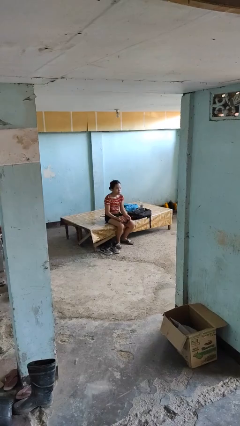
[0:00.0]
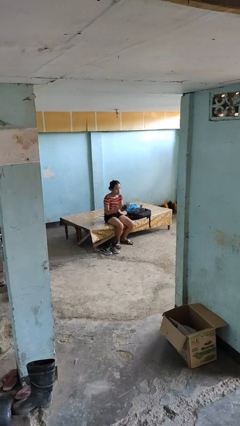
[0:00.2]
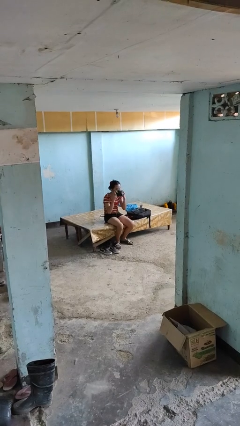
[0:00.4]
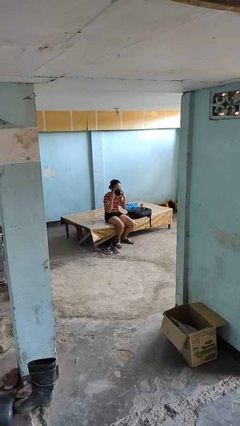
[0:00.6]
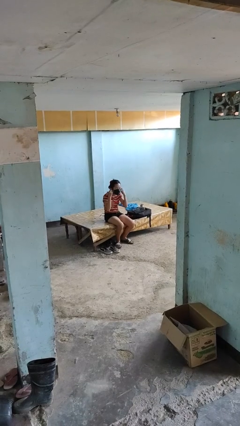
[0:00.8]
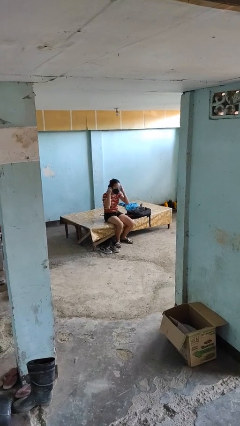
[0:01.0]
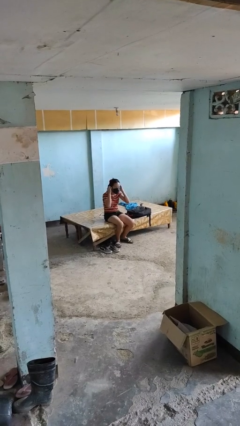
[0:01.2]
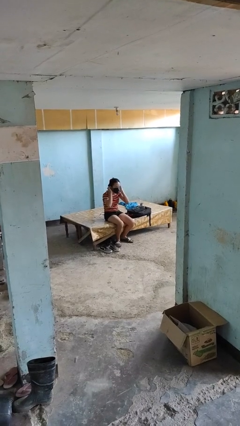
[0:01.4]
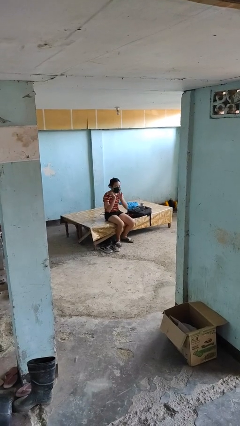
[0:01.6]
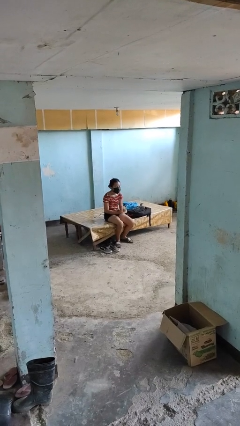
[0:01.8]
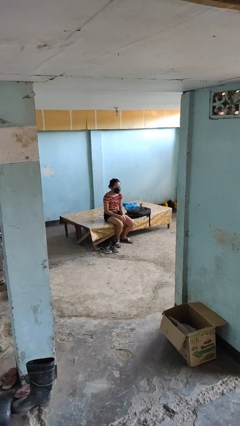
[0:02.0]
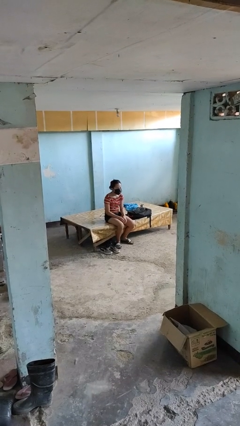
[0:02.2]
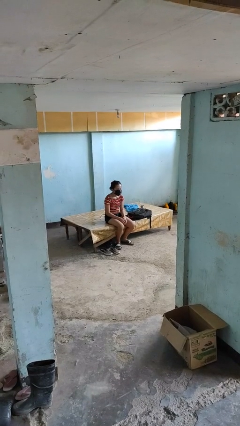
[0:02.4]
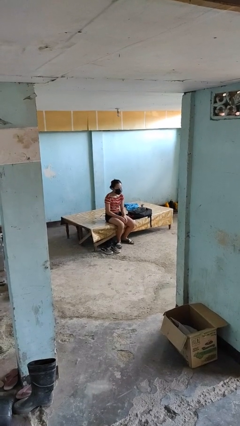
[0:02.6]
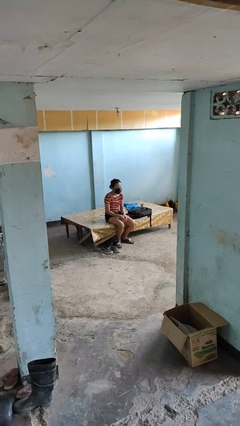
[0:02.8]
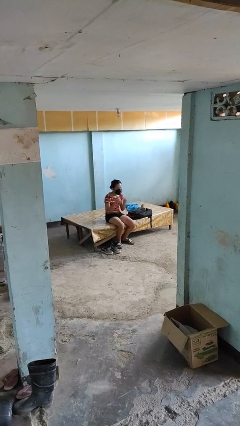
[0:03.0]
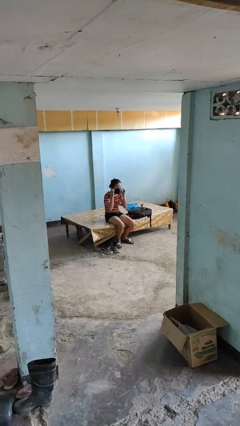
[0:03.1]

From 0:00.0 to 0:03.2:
person puts on facemask

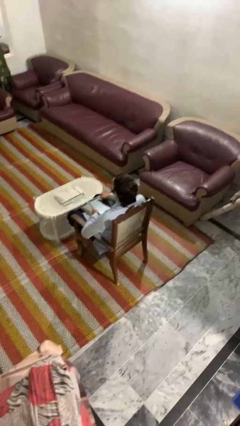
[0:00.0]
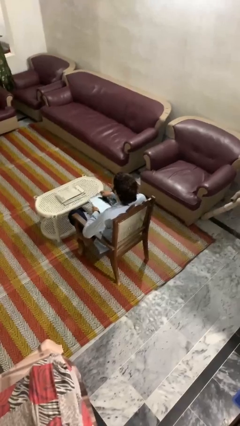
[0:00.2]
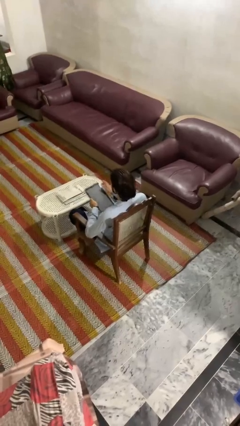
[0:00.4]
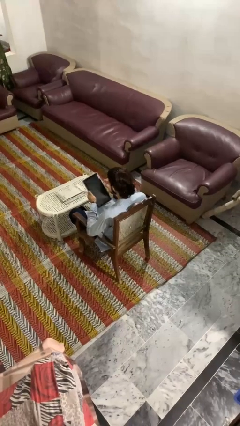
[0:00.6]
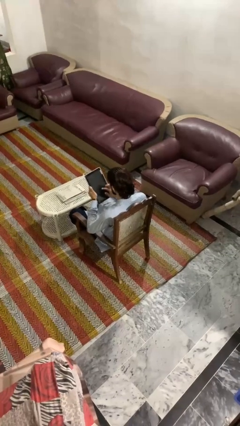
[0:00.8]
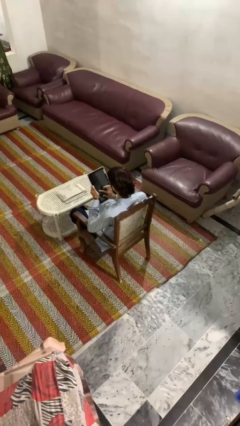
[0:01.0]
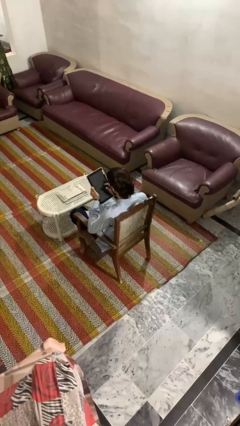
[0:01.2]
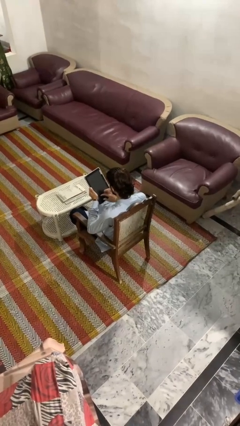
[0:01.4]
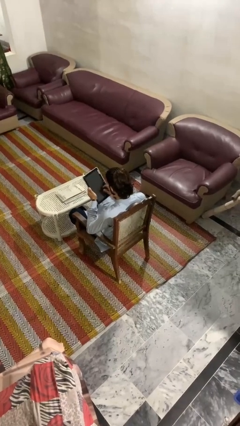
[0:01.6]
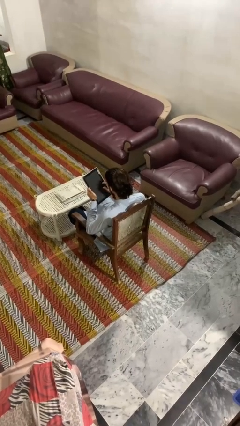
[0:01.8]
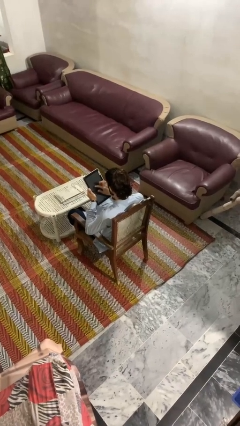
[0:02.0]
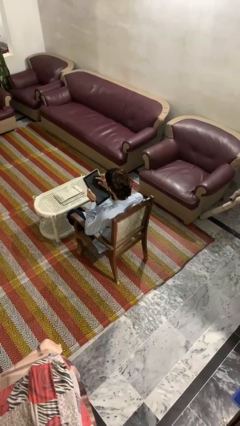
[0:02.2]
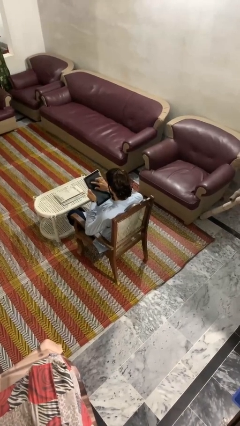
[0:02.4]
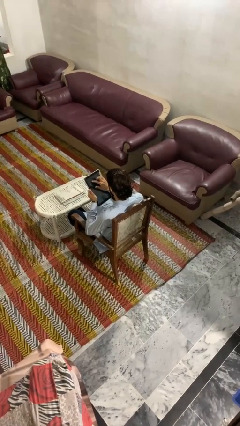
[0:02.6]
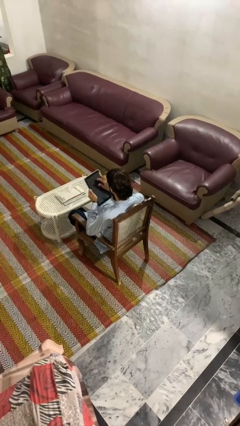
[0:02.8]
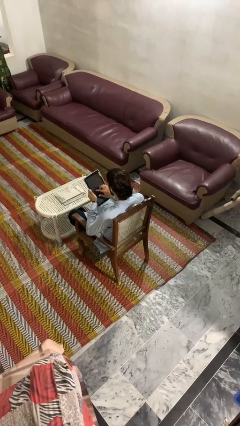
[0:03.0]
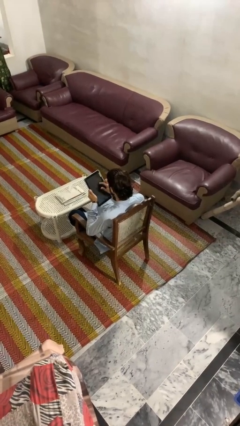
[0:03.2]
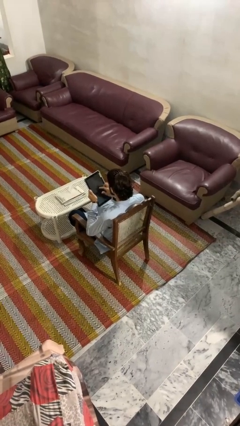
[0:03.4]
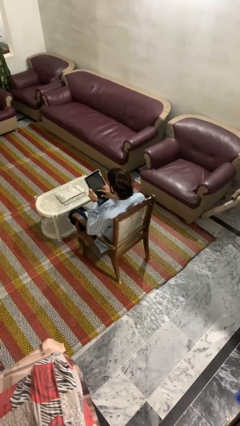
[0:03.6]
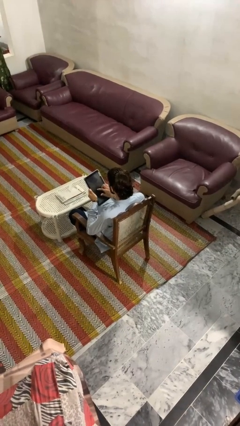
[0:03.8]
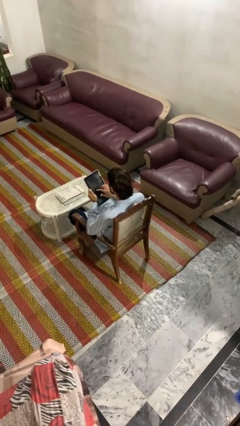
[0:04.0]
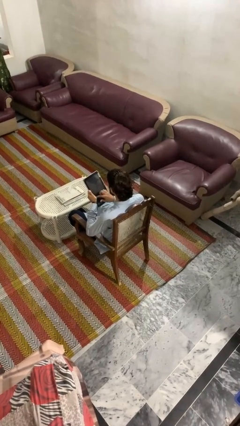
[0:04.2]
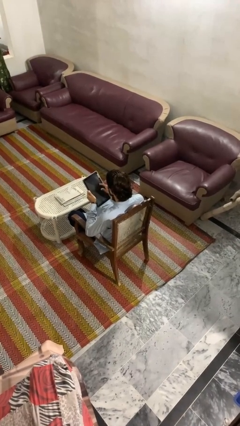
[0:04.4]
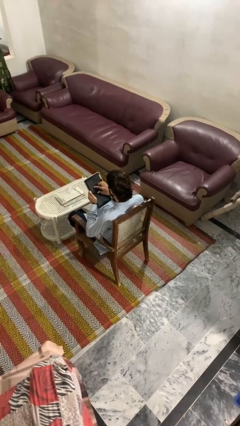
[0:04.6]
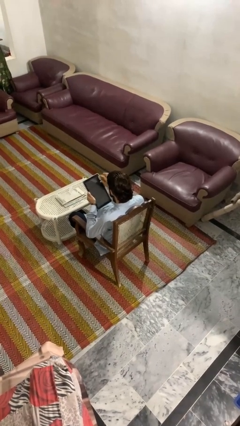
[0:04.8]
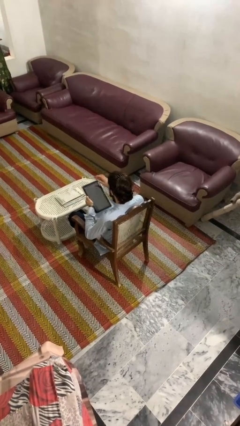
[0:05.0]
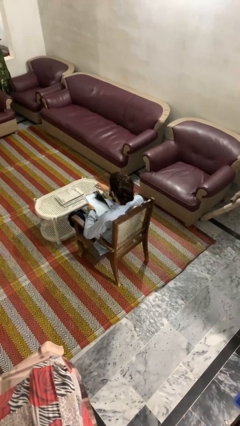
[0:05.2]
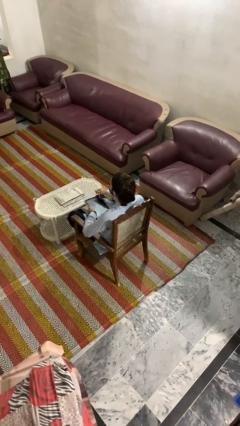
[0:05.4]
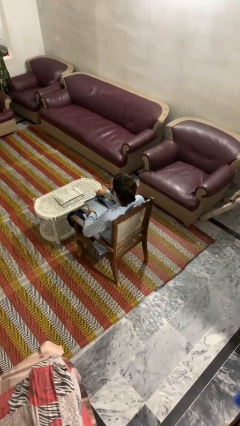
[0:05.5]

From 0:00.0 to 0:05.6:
person interacts with tablet

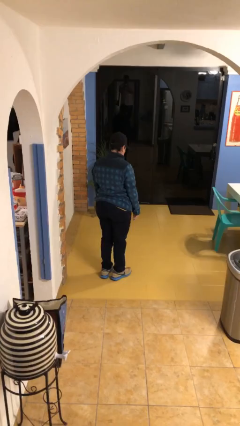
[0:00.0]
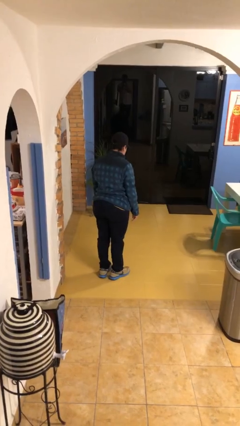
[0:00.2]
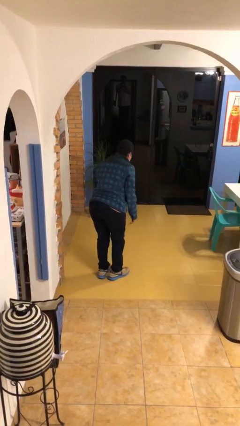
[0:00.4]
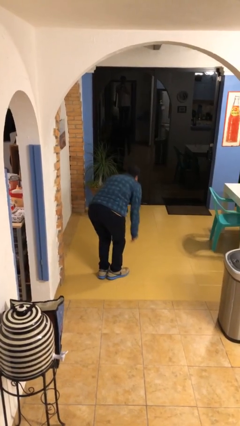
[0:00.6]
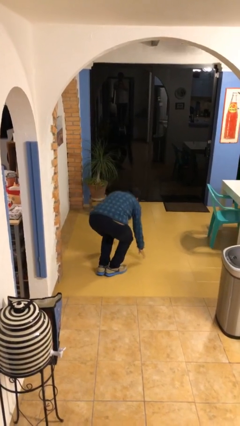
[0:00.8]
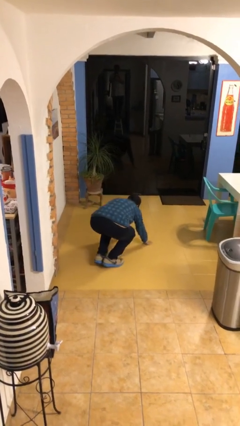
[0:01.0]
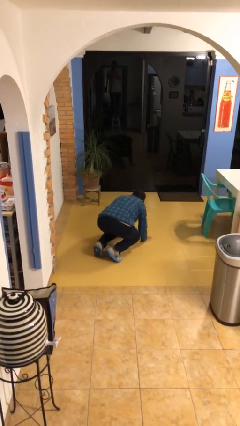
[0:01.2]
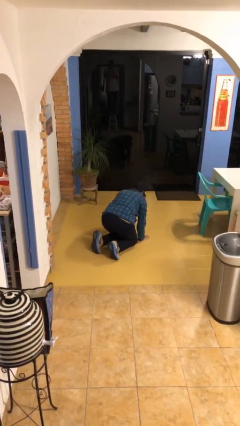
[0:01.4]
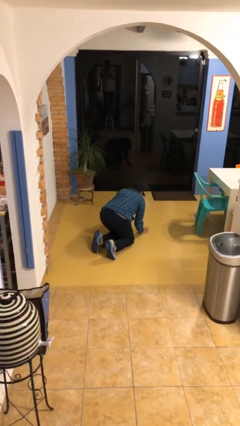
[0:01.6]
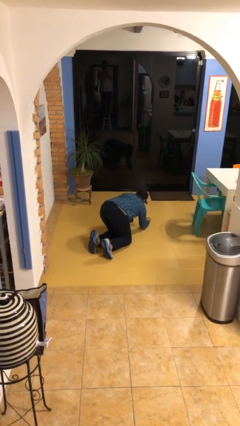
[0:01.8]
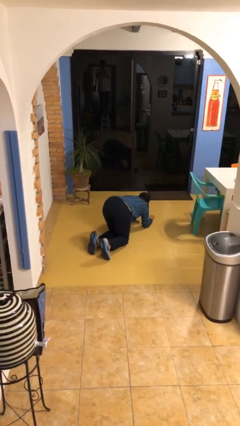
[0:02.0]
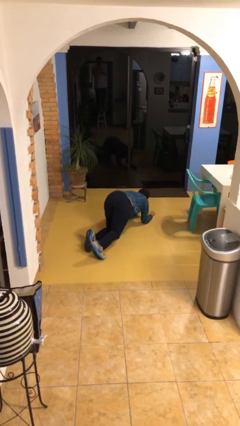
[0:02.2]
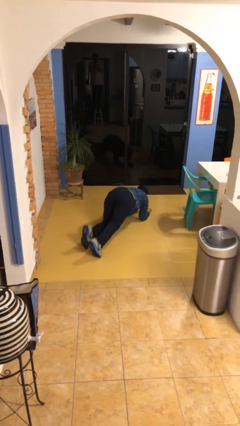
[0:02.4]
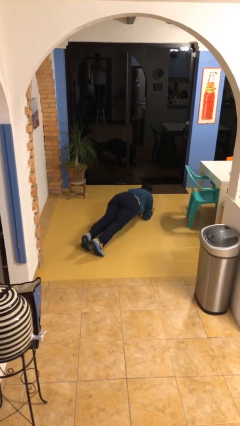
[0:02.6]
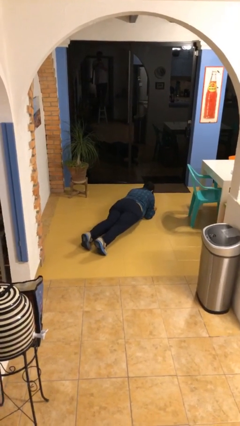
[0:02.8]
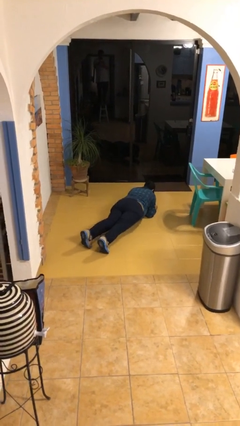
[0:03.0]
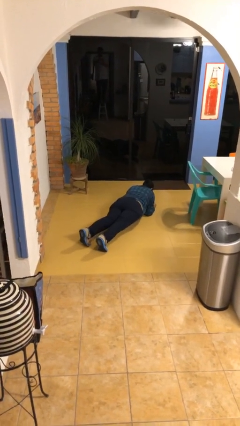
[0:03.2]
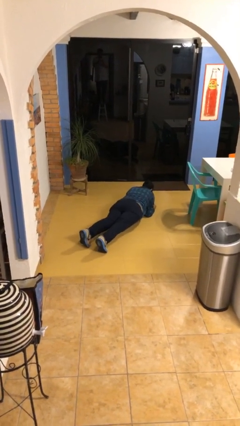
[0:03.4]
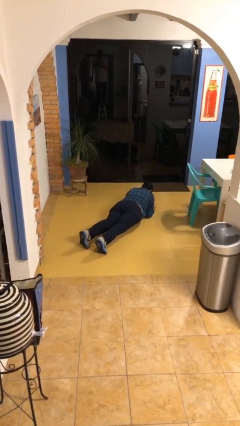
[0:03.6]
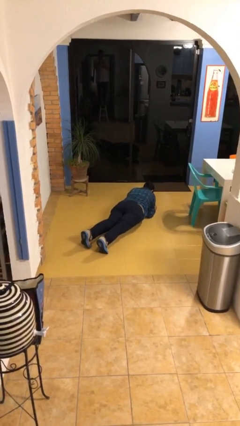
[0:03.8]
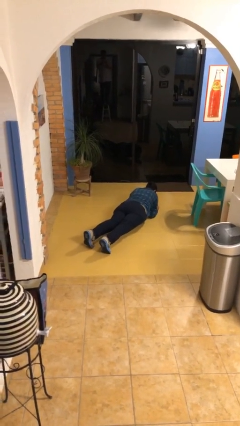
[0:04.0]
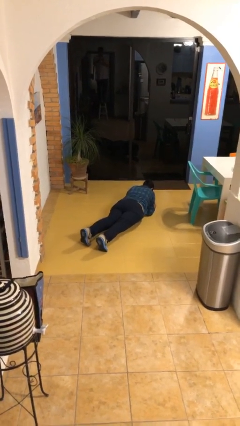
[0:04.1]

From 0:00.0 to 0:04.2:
person exercises with plank

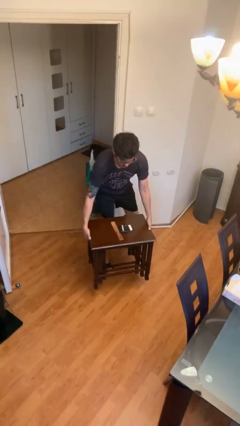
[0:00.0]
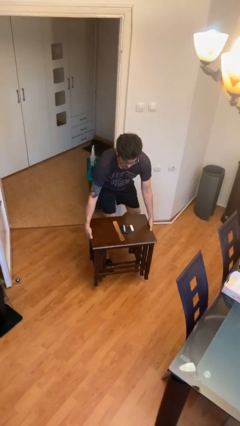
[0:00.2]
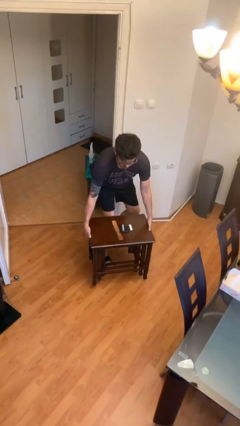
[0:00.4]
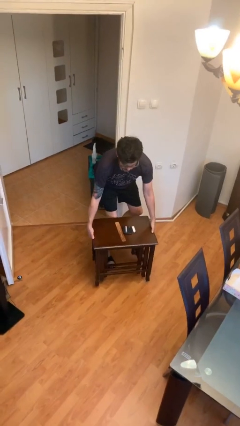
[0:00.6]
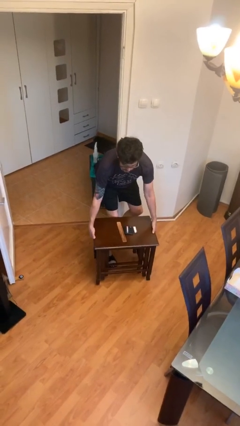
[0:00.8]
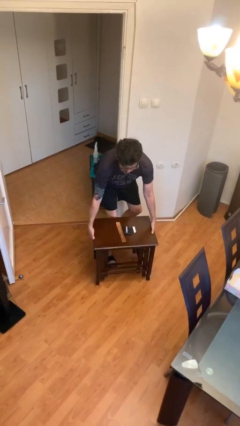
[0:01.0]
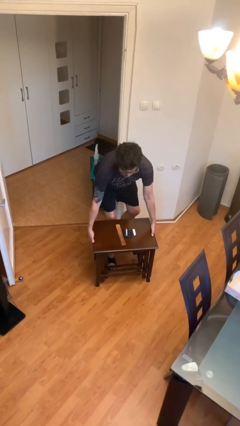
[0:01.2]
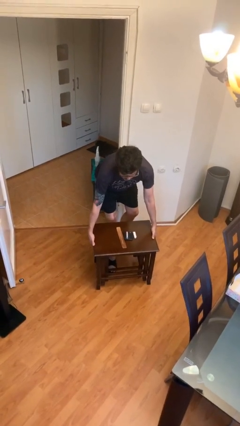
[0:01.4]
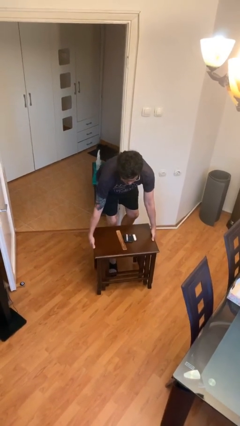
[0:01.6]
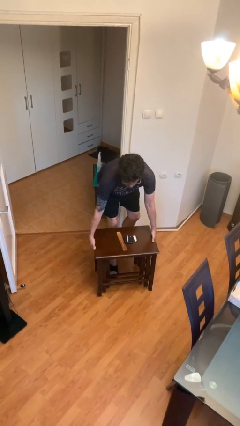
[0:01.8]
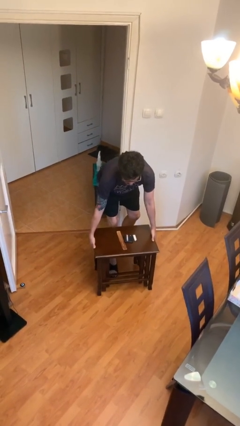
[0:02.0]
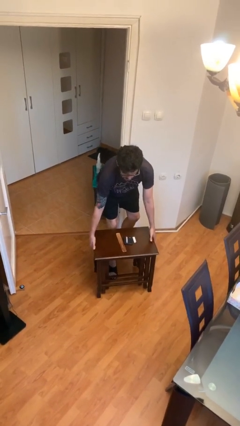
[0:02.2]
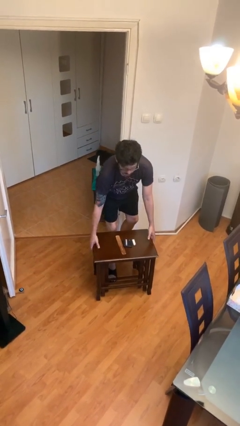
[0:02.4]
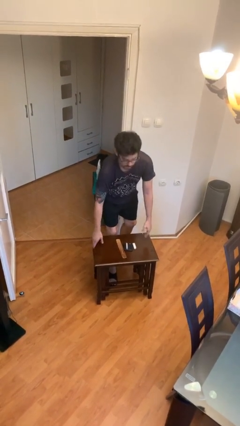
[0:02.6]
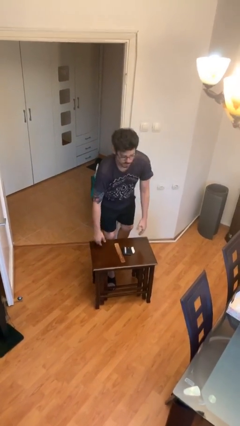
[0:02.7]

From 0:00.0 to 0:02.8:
person puts down object on floor

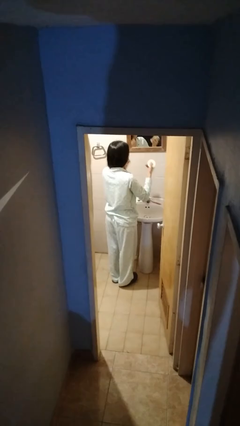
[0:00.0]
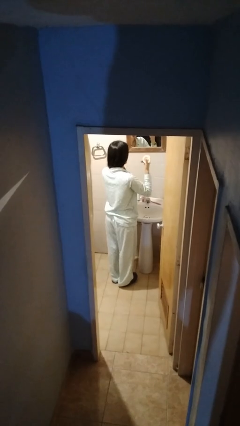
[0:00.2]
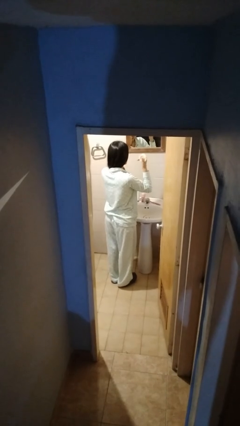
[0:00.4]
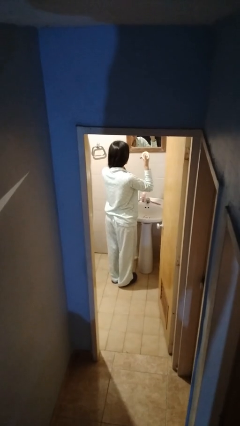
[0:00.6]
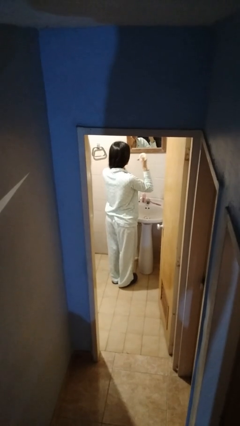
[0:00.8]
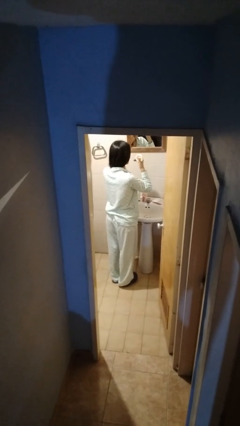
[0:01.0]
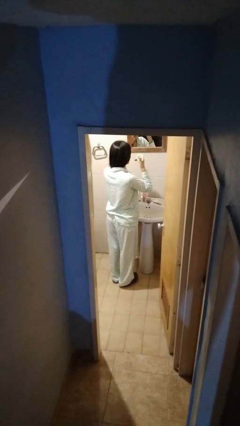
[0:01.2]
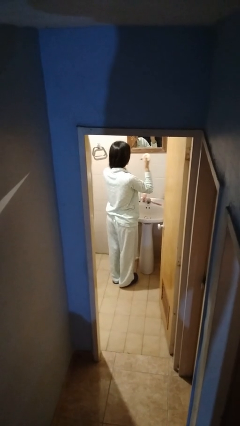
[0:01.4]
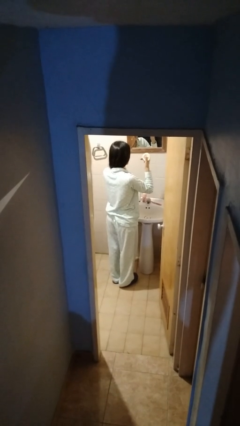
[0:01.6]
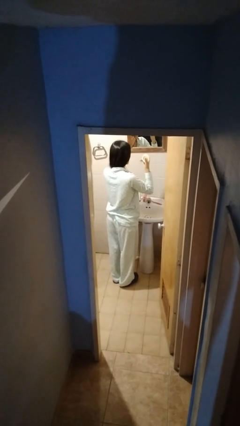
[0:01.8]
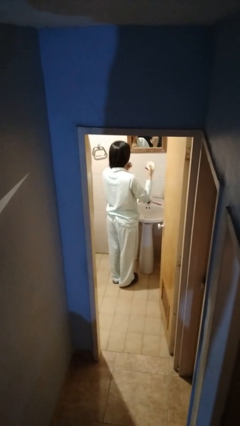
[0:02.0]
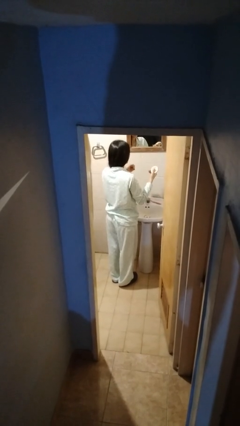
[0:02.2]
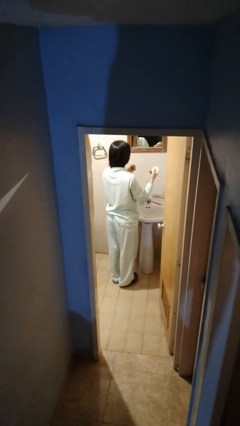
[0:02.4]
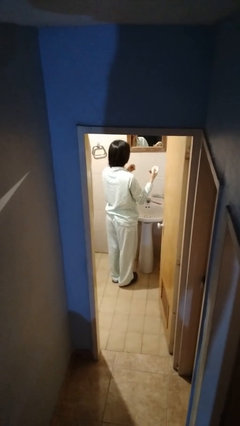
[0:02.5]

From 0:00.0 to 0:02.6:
person flosses
